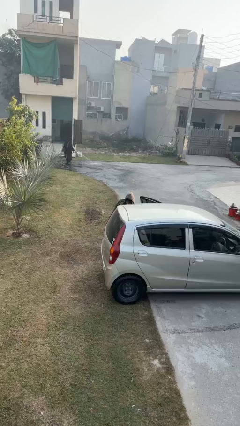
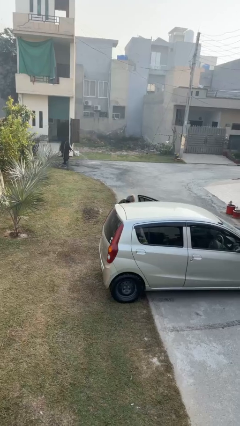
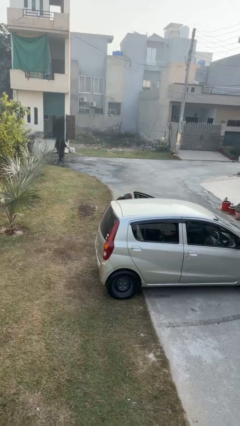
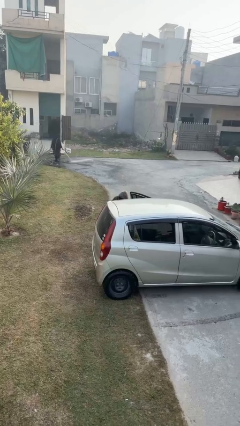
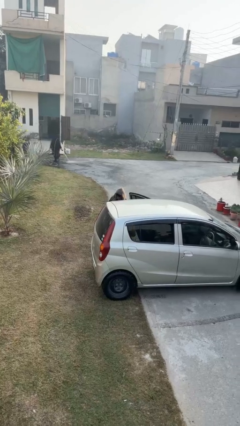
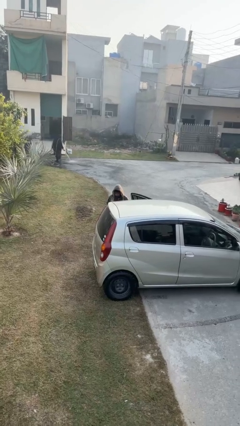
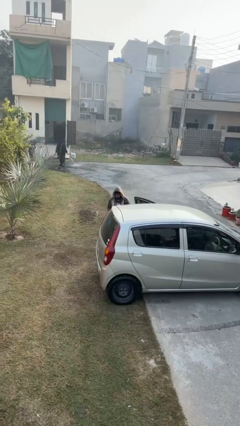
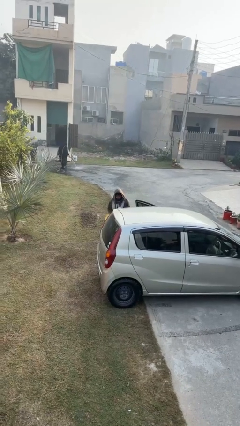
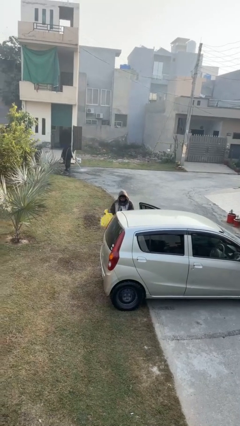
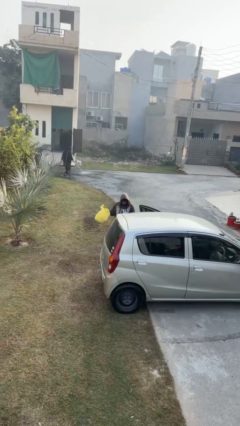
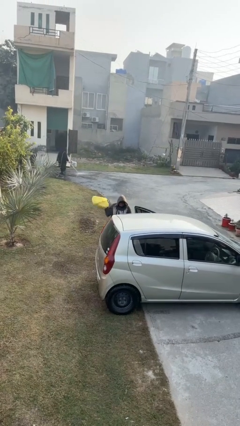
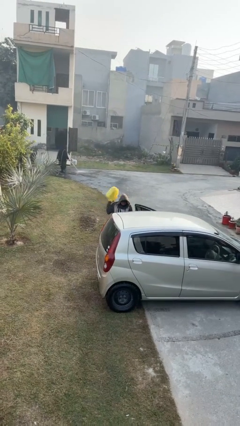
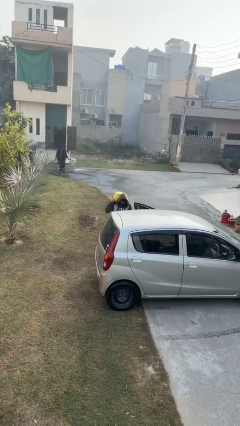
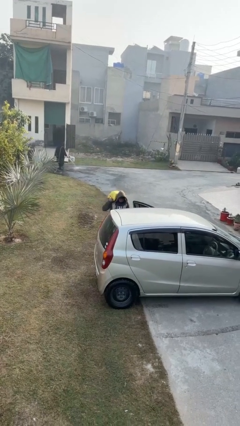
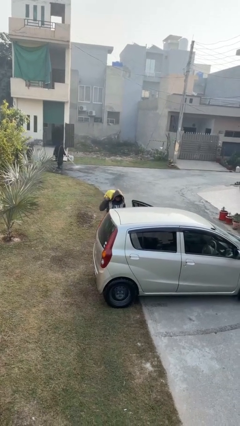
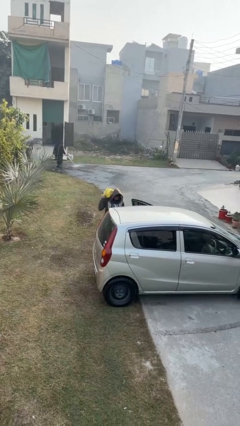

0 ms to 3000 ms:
person unloads car

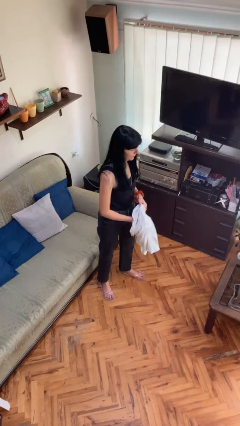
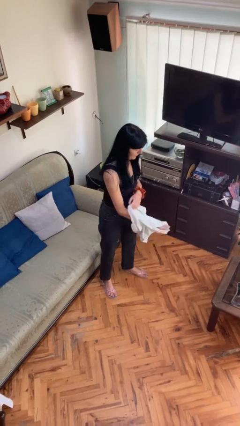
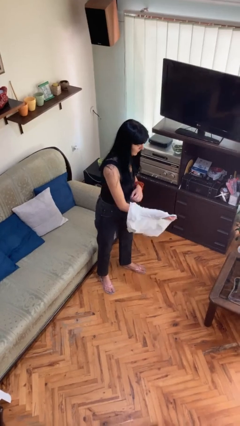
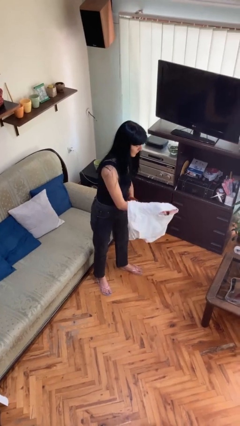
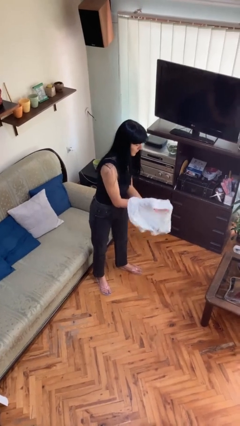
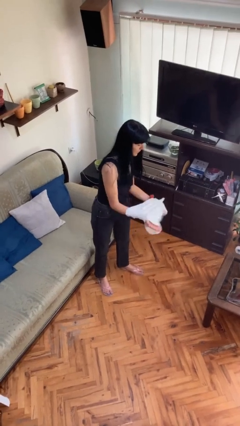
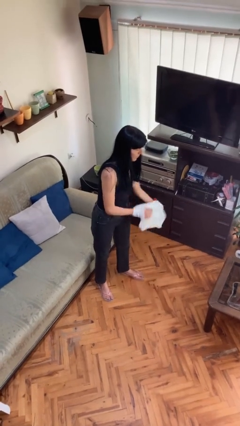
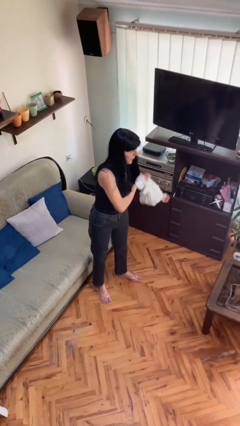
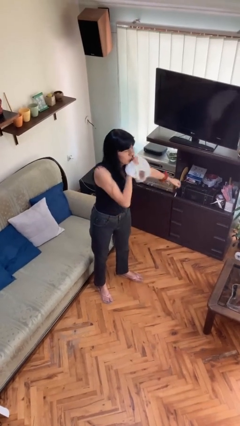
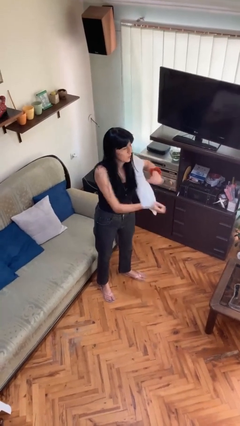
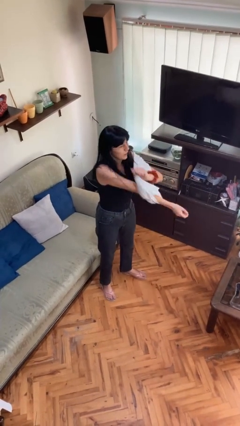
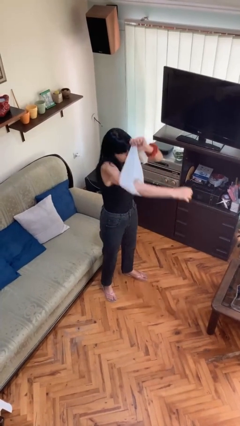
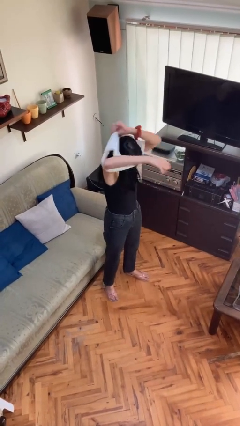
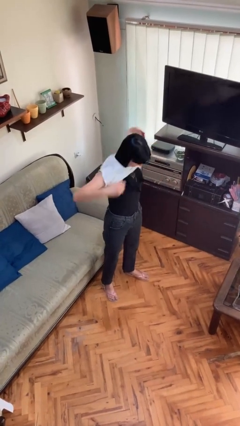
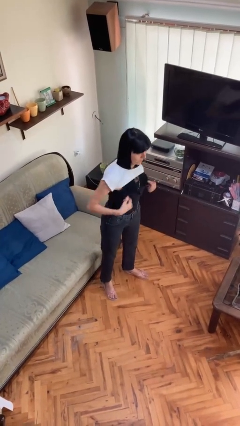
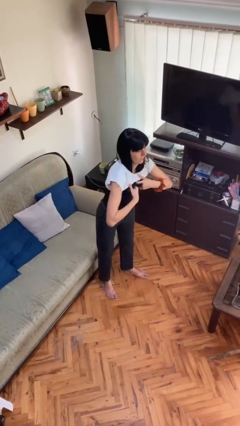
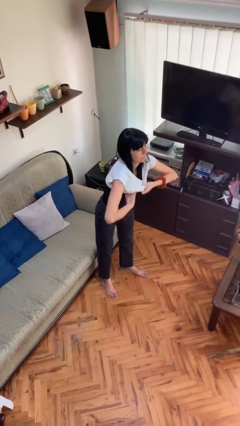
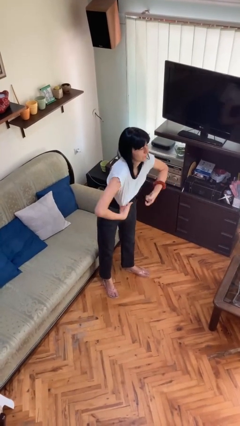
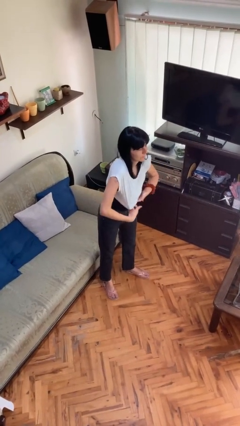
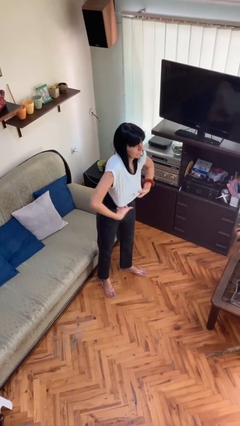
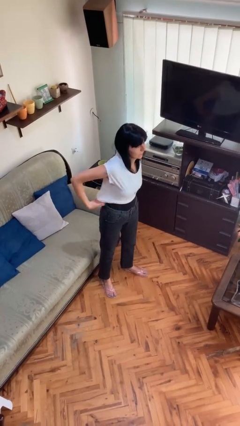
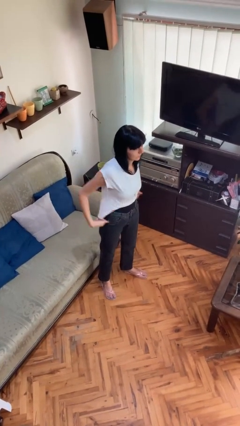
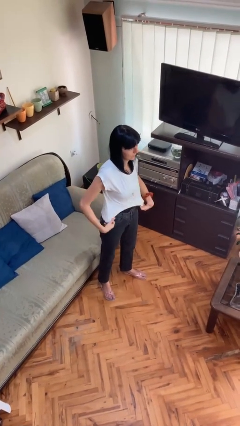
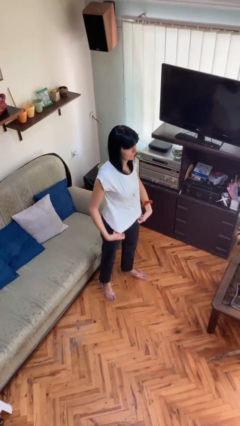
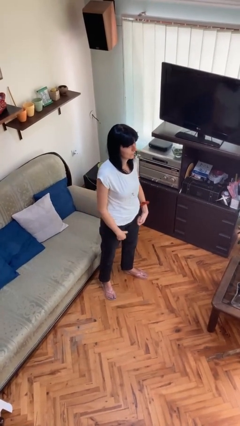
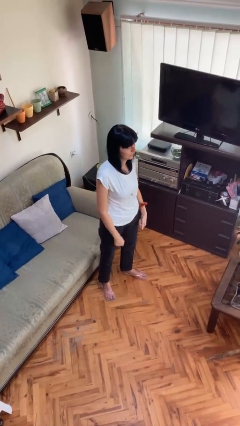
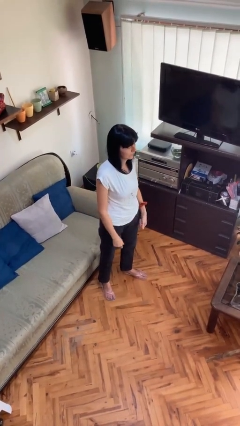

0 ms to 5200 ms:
person puts on shirt

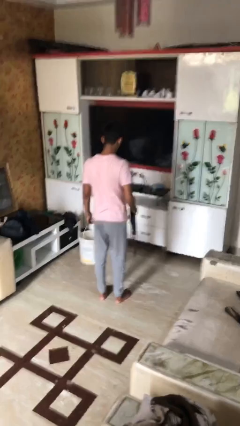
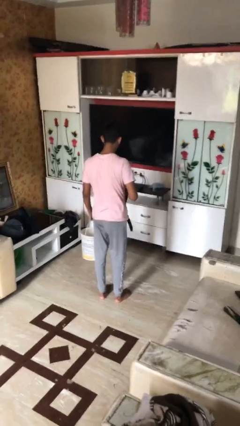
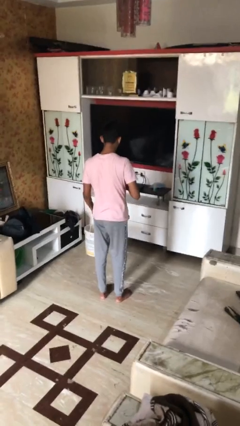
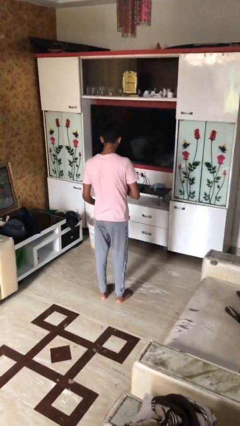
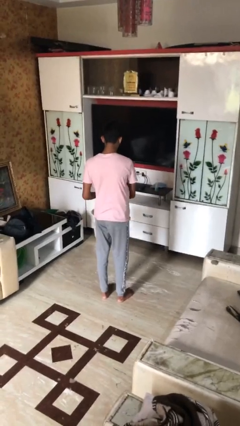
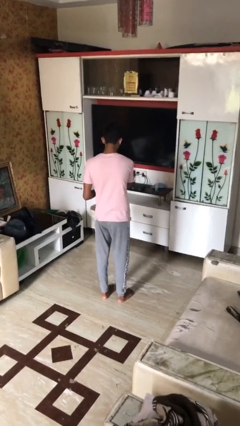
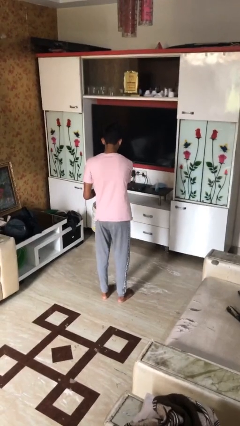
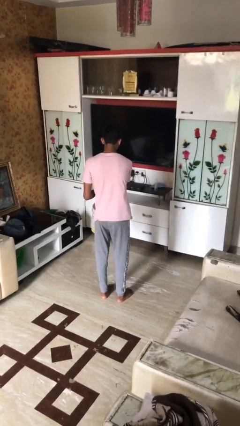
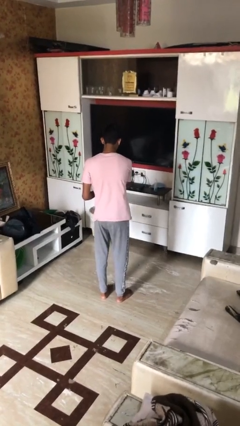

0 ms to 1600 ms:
person puts object into basket

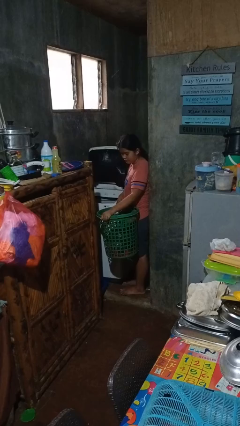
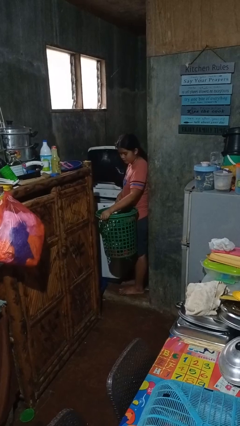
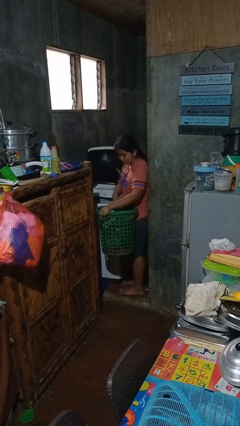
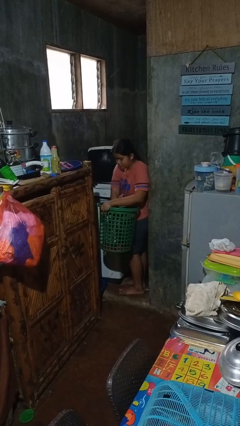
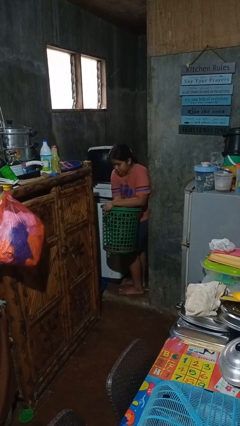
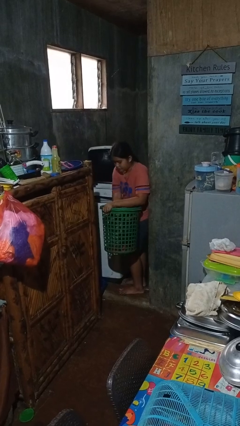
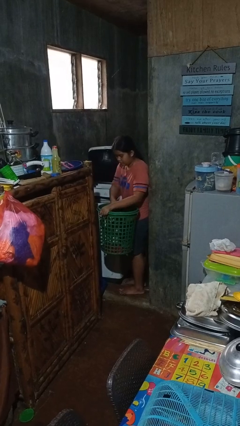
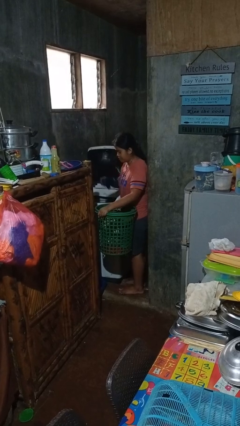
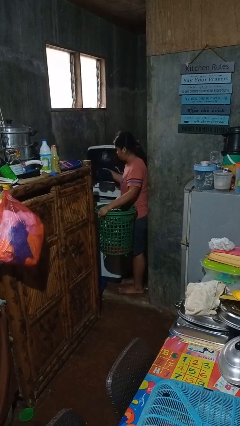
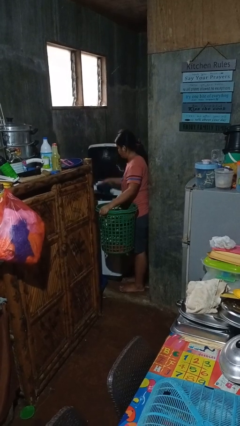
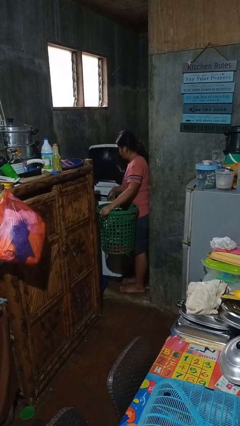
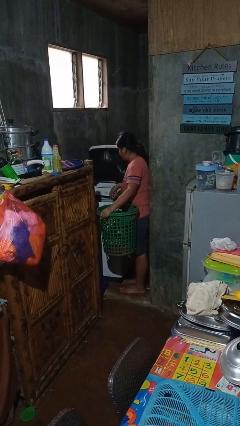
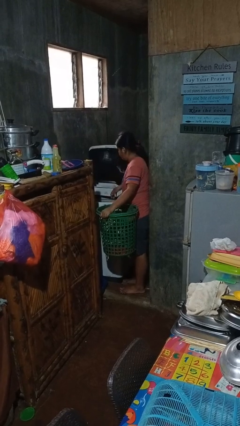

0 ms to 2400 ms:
person loads clotheswasher

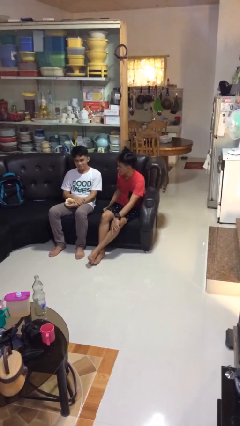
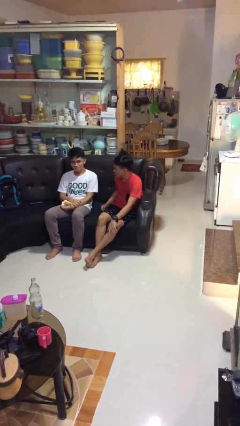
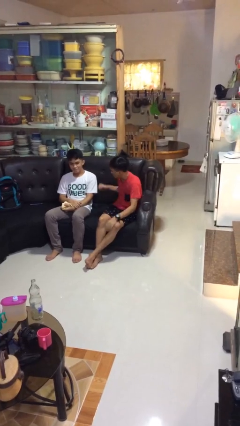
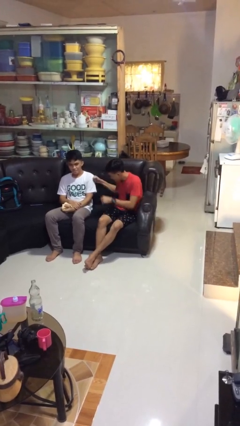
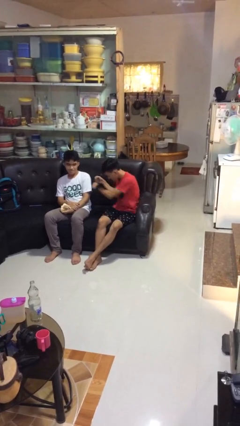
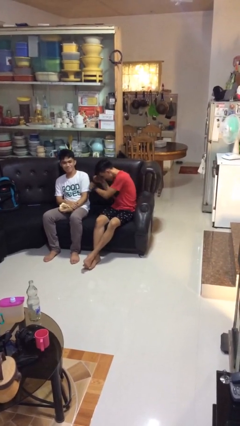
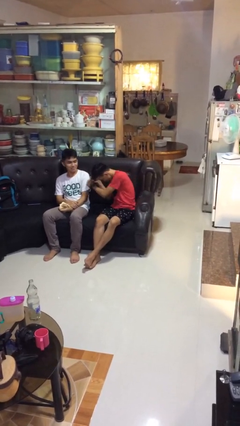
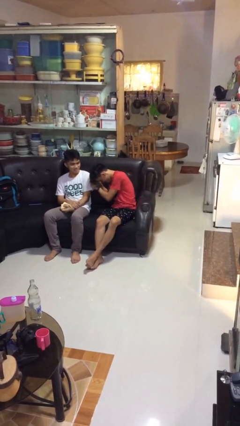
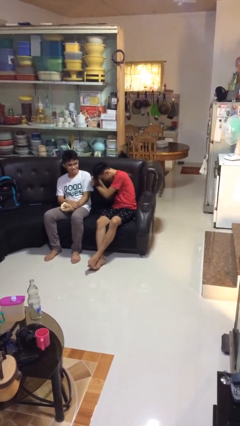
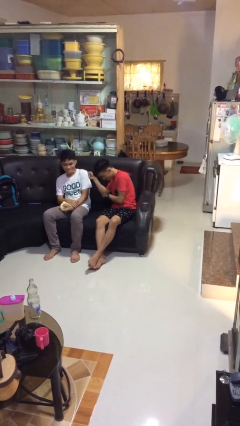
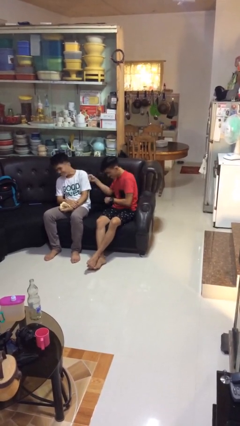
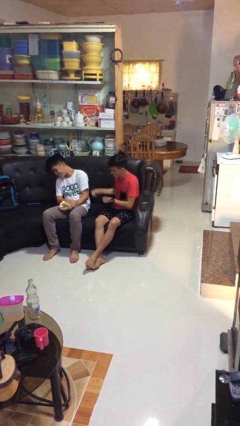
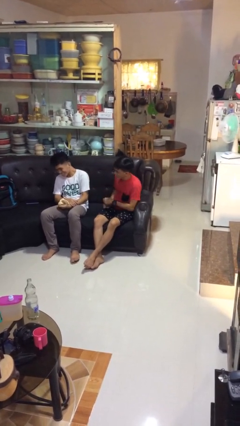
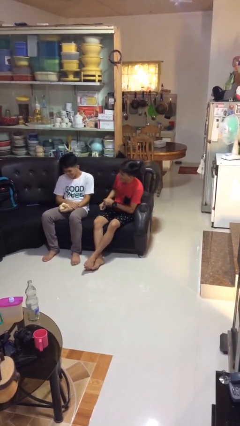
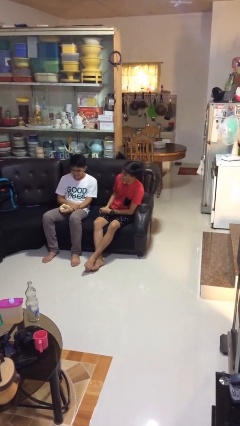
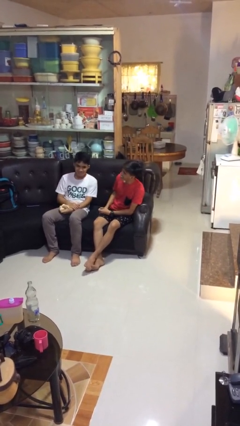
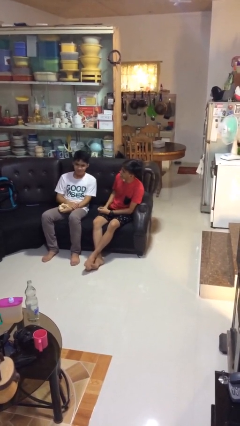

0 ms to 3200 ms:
person pounds shoulders of person

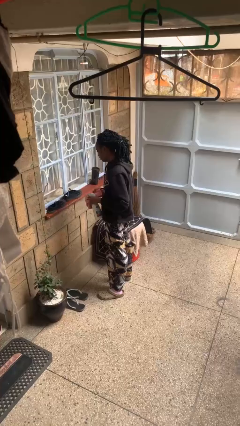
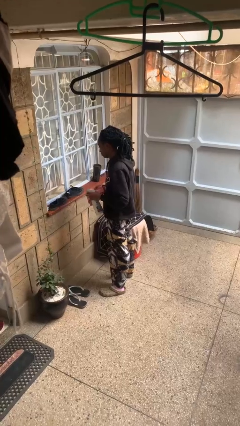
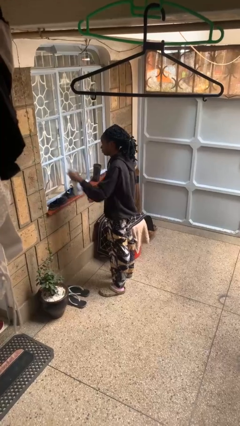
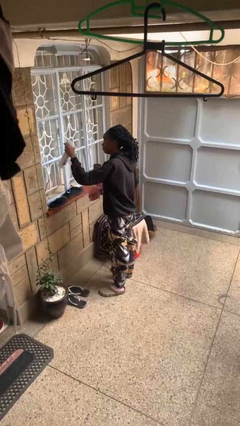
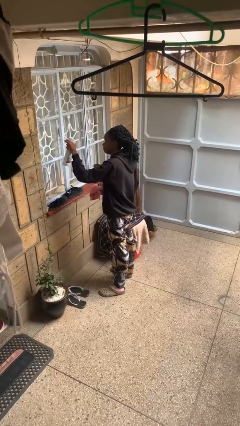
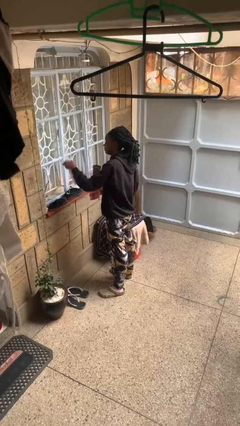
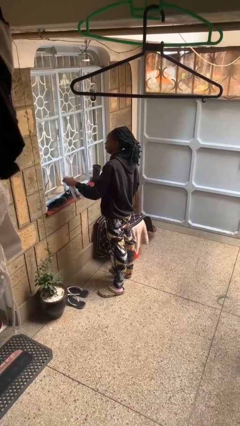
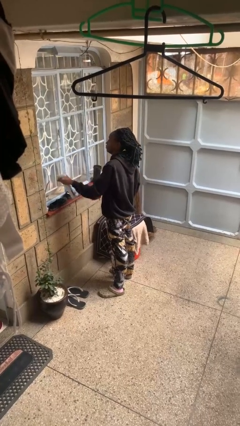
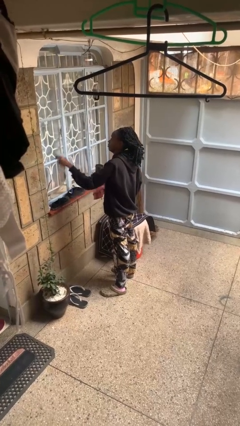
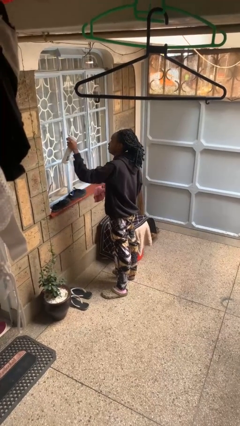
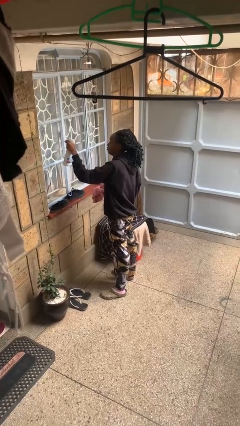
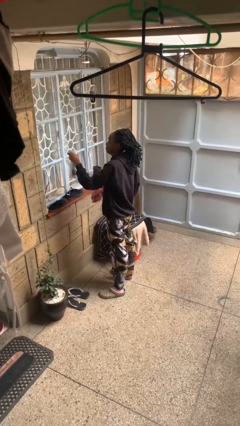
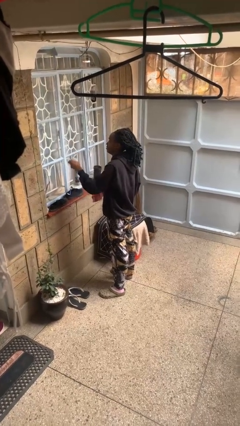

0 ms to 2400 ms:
person sprays from bottle
